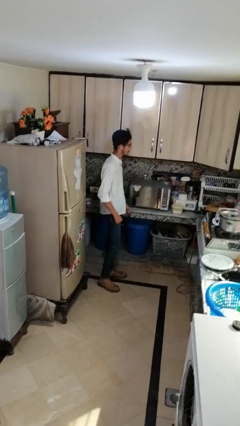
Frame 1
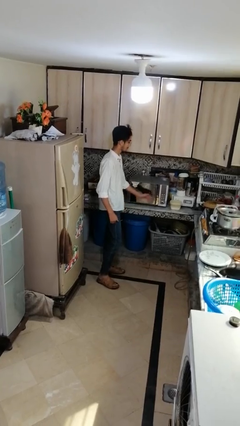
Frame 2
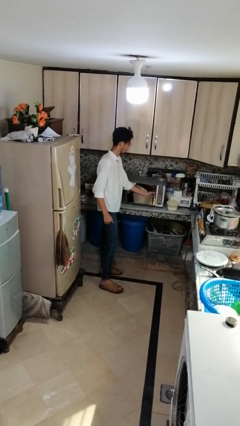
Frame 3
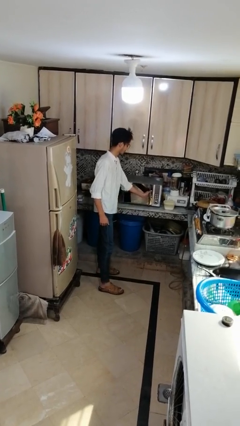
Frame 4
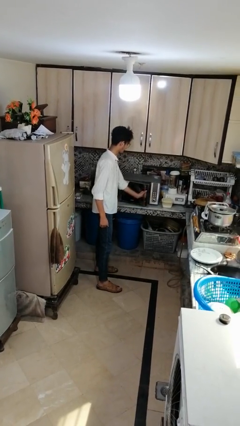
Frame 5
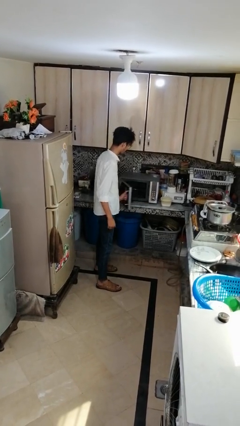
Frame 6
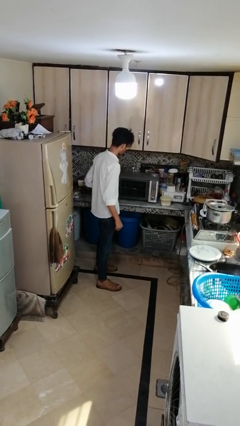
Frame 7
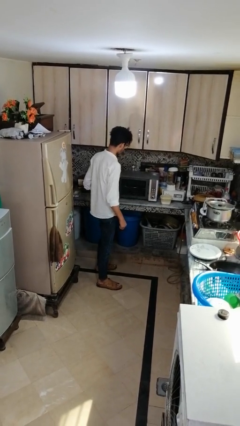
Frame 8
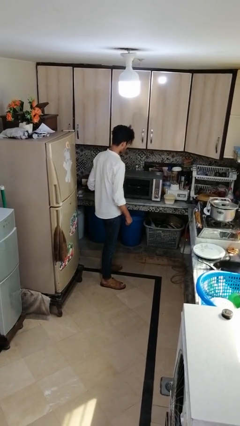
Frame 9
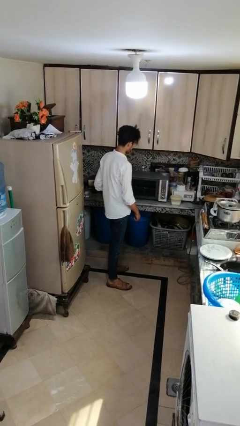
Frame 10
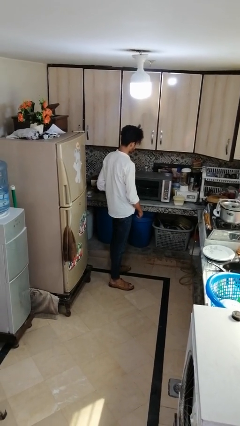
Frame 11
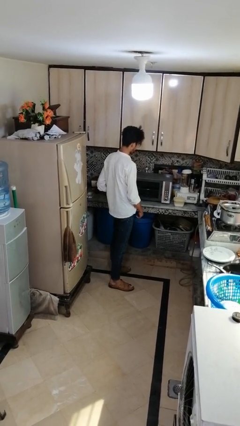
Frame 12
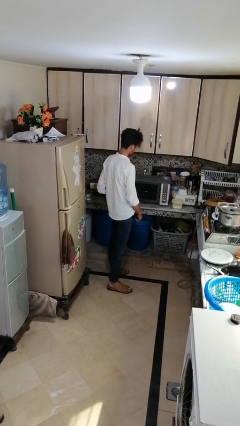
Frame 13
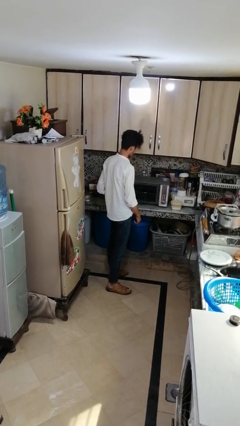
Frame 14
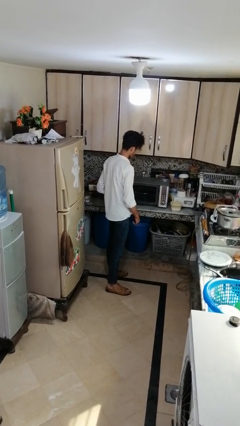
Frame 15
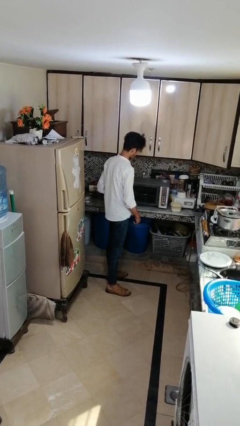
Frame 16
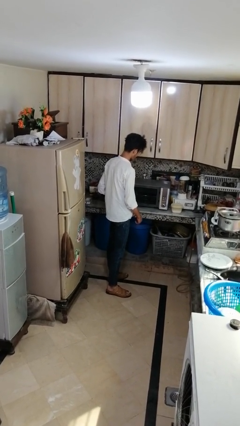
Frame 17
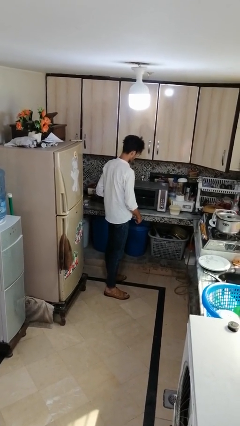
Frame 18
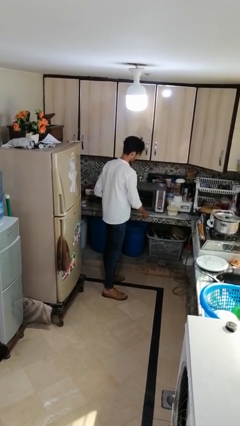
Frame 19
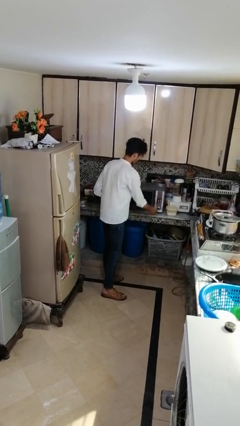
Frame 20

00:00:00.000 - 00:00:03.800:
person opens microwave

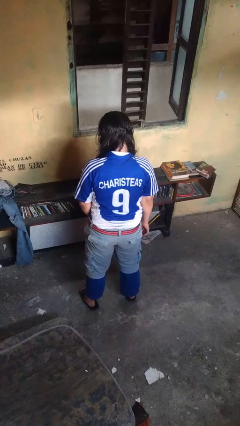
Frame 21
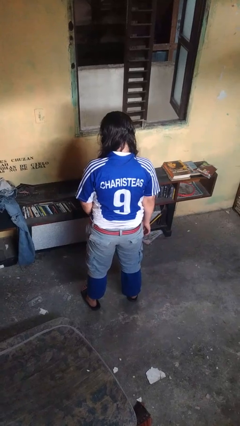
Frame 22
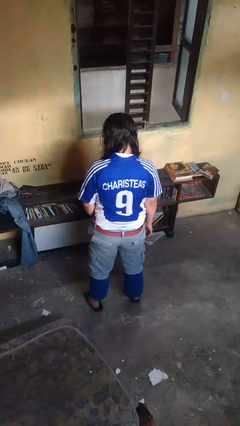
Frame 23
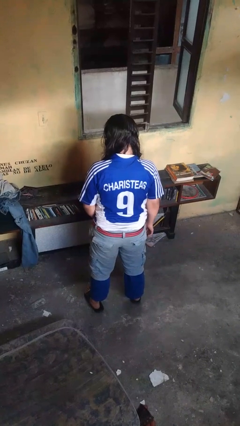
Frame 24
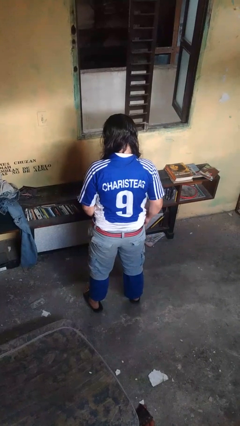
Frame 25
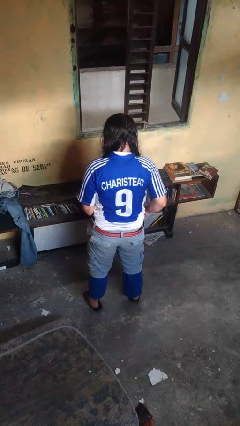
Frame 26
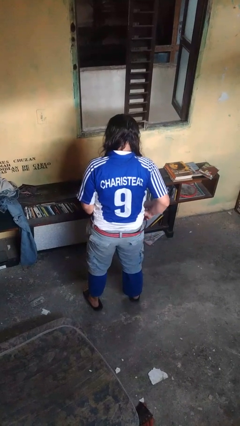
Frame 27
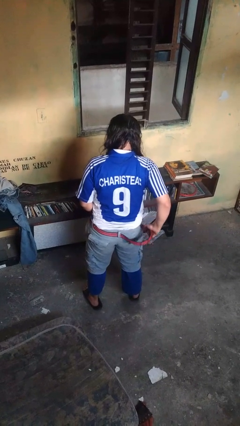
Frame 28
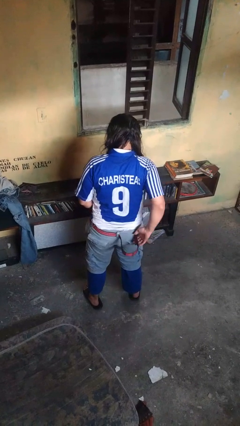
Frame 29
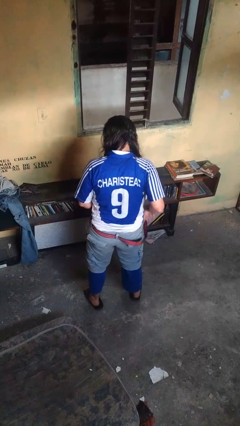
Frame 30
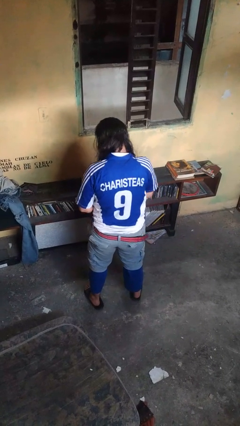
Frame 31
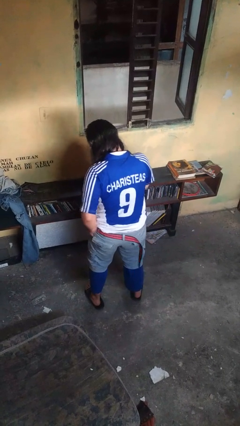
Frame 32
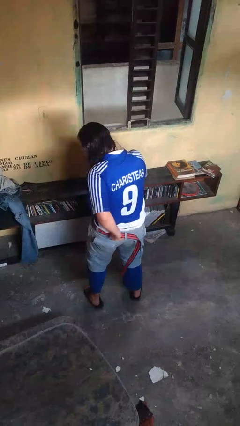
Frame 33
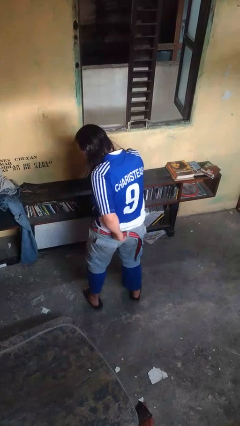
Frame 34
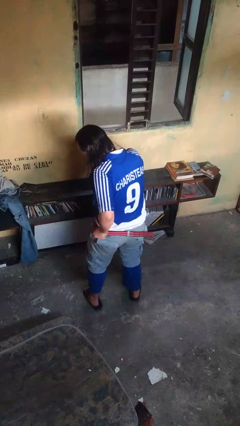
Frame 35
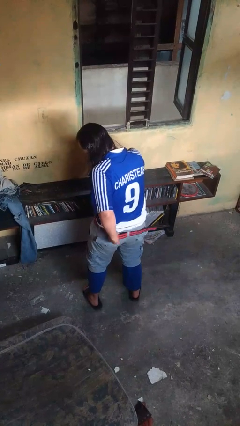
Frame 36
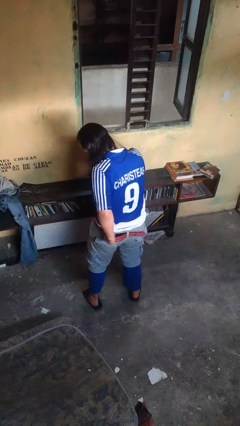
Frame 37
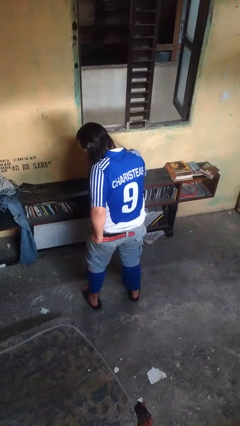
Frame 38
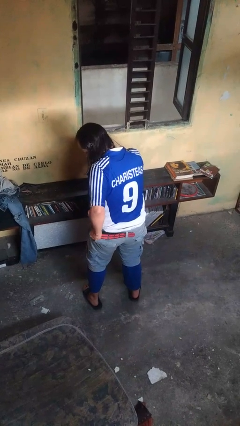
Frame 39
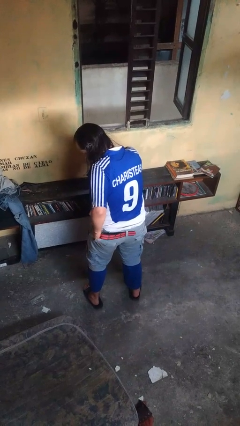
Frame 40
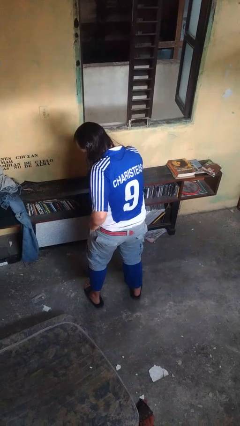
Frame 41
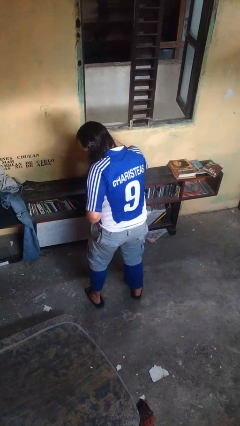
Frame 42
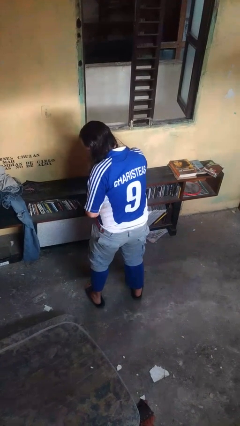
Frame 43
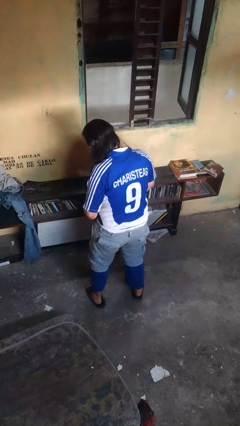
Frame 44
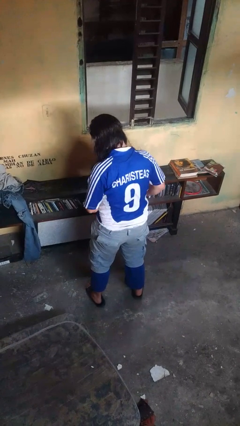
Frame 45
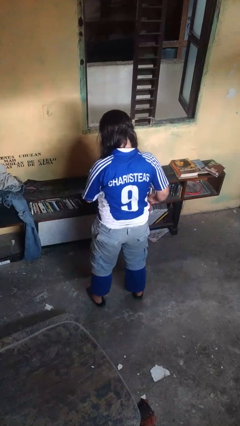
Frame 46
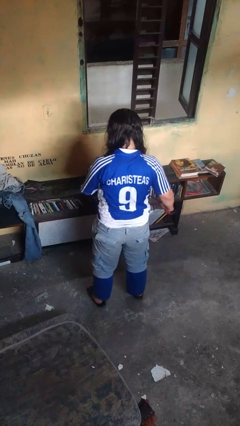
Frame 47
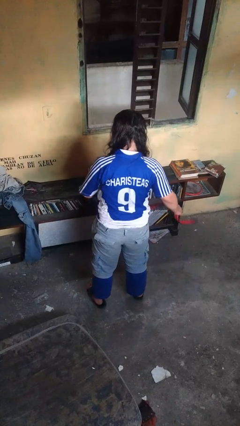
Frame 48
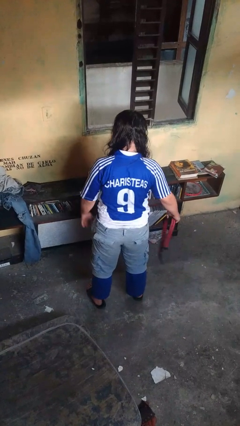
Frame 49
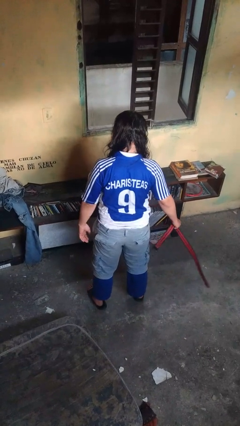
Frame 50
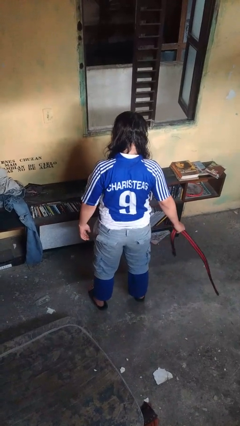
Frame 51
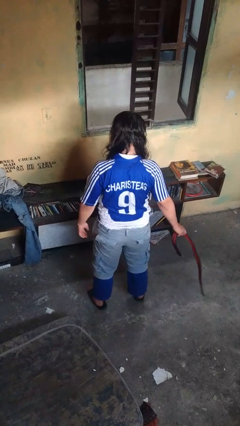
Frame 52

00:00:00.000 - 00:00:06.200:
person takes off belt

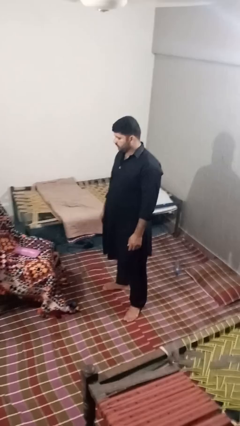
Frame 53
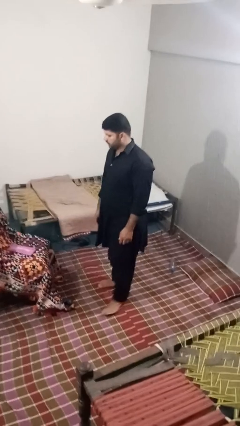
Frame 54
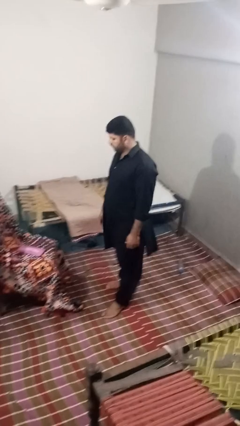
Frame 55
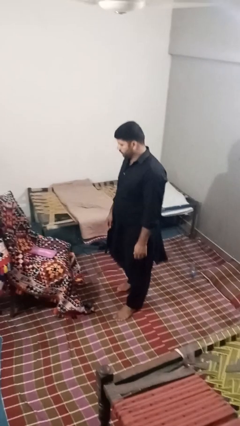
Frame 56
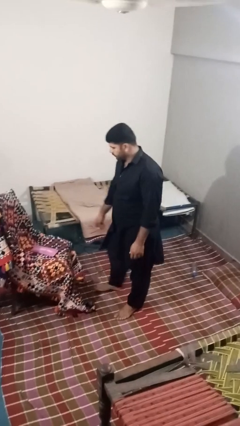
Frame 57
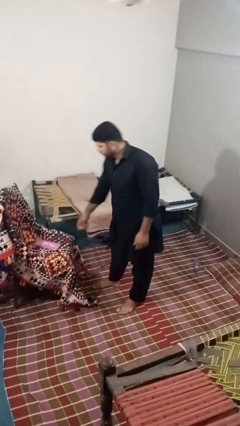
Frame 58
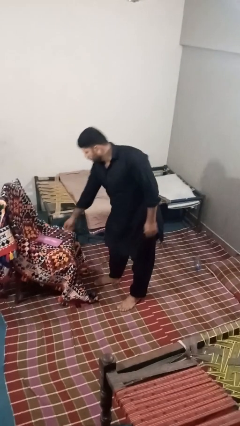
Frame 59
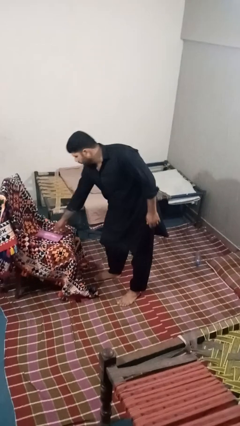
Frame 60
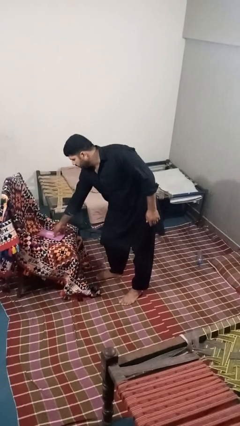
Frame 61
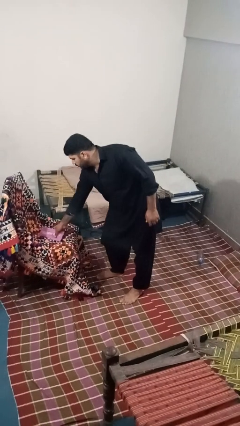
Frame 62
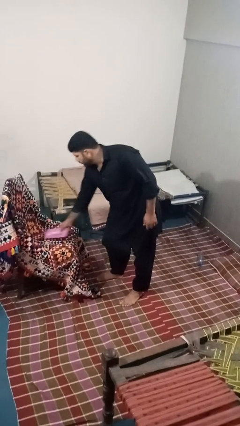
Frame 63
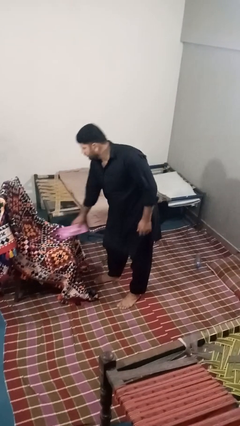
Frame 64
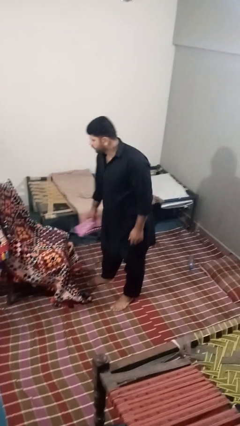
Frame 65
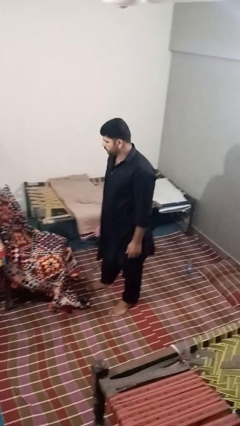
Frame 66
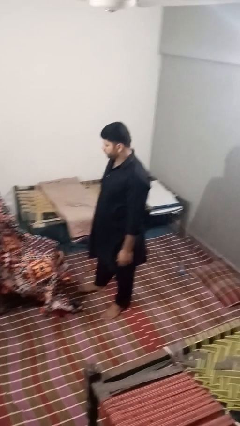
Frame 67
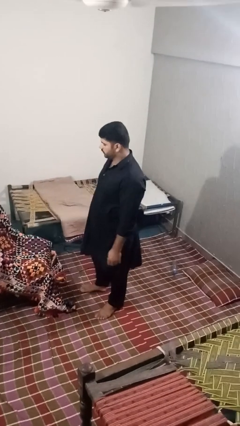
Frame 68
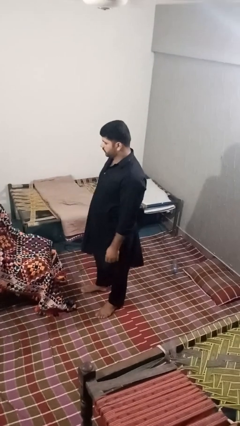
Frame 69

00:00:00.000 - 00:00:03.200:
person picks up object from couch

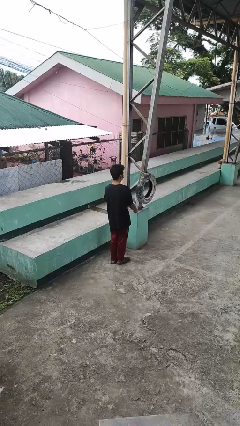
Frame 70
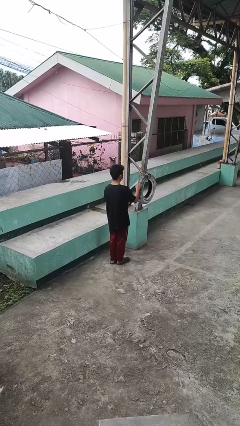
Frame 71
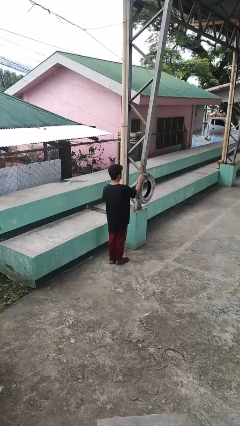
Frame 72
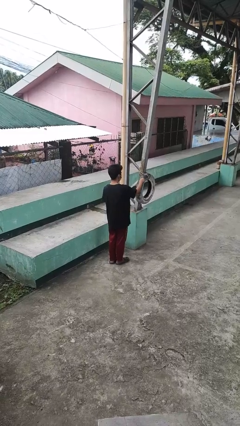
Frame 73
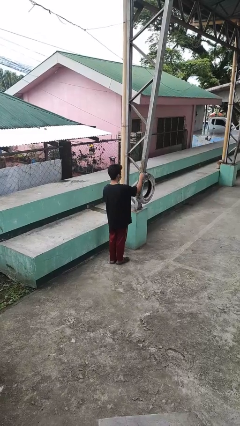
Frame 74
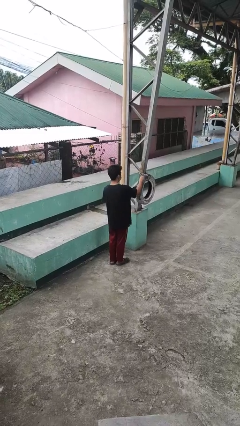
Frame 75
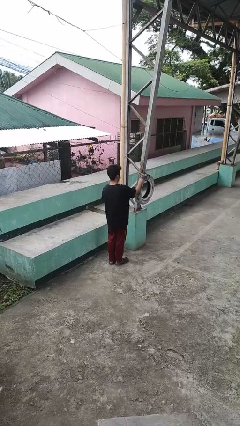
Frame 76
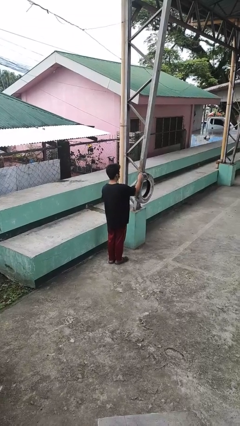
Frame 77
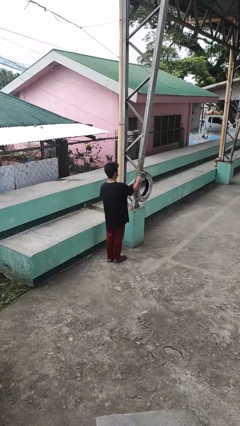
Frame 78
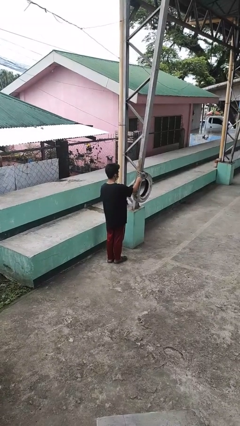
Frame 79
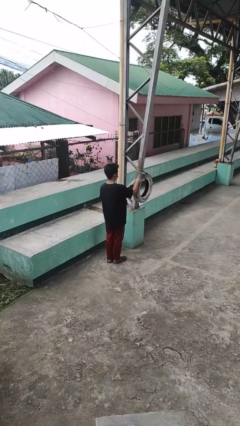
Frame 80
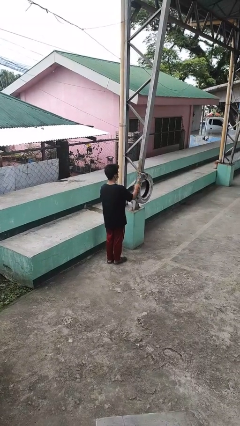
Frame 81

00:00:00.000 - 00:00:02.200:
person taps object with finger

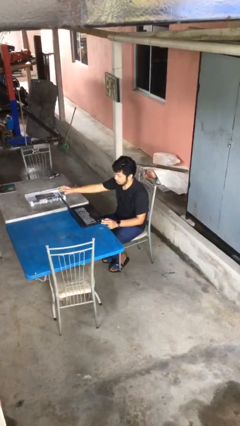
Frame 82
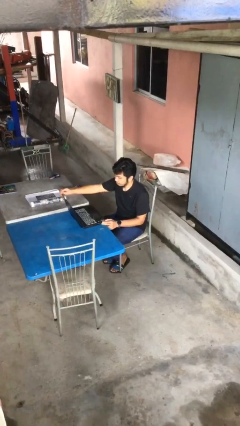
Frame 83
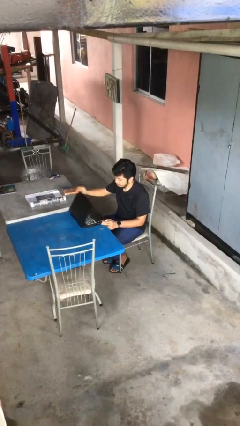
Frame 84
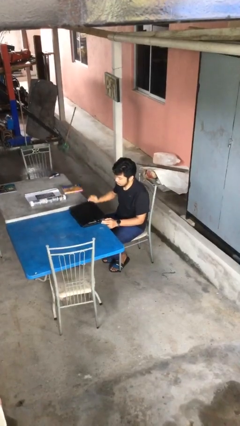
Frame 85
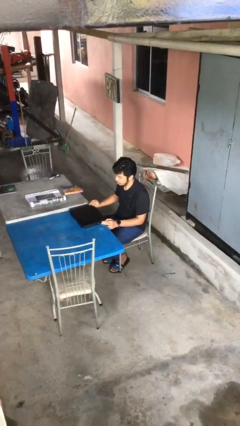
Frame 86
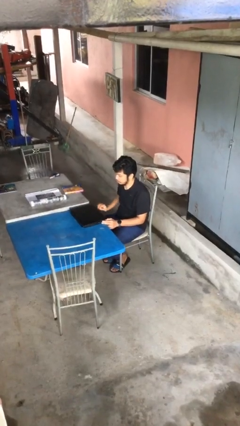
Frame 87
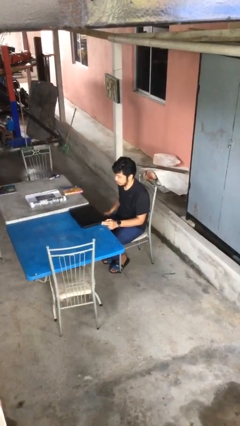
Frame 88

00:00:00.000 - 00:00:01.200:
person closes laptop

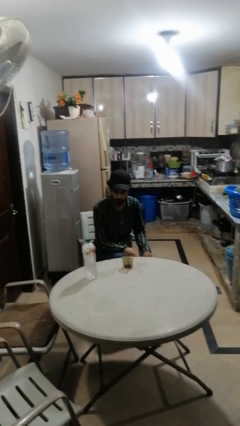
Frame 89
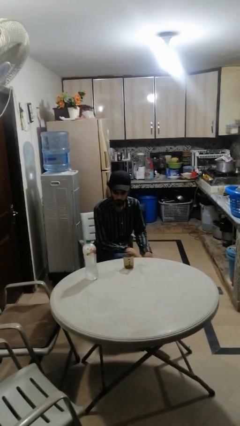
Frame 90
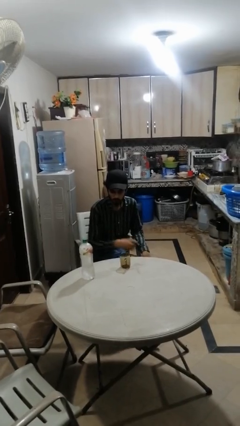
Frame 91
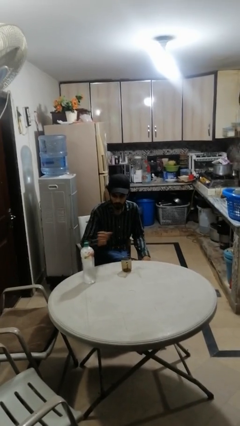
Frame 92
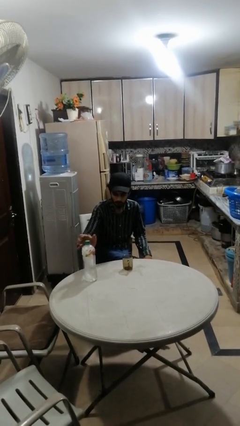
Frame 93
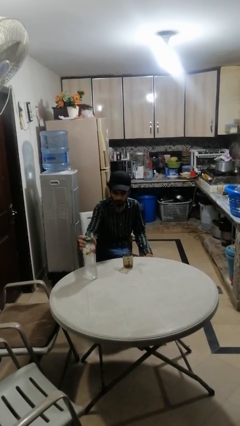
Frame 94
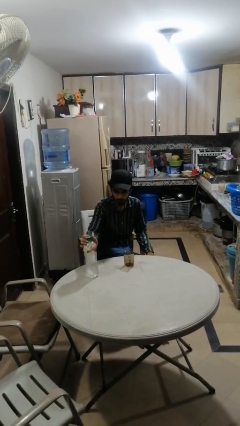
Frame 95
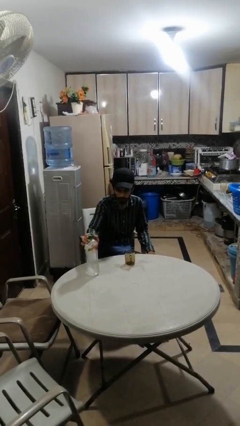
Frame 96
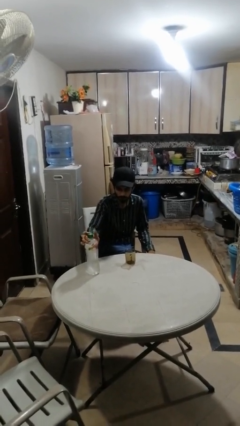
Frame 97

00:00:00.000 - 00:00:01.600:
person unscrews lid from bottle
